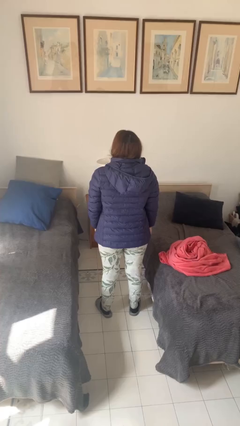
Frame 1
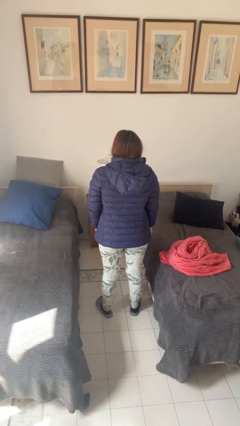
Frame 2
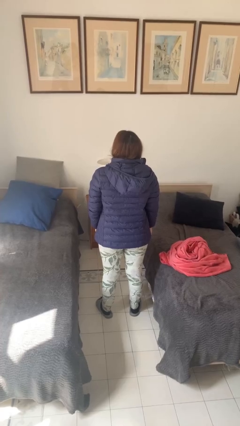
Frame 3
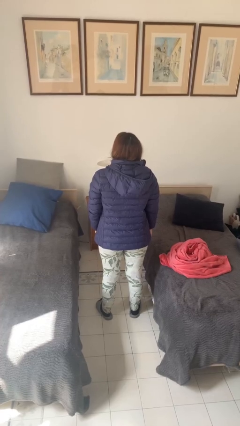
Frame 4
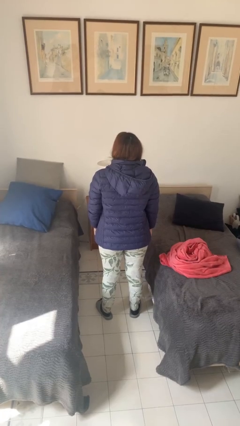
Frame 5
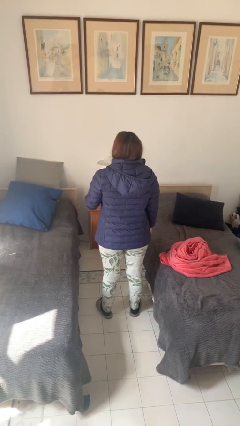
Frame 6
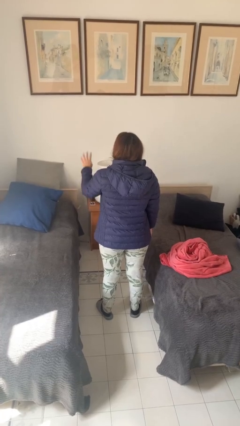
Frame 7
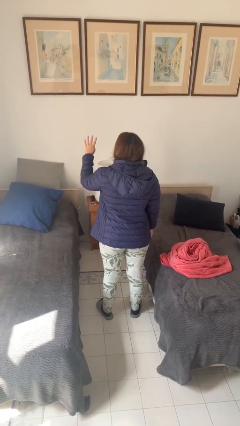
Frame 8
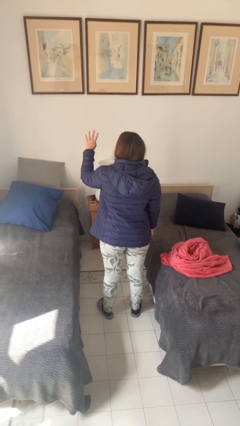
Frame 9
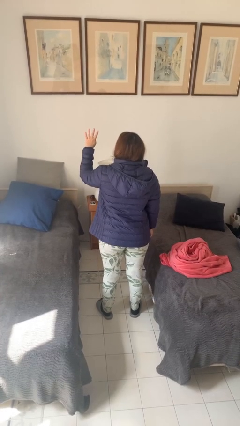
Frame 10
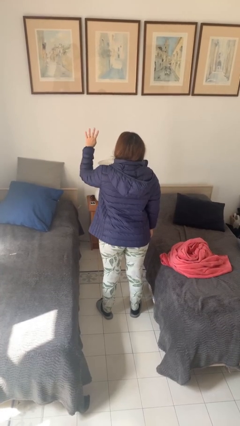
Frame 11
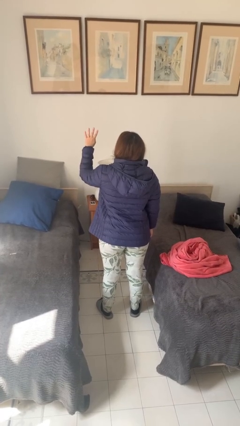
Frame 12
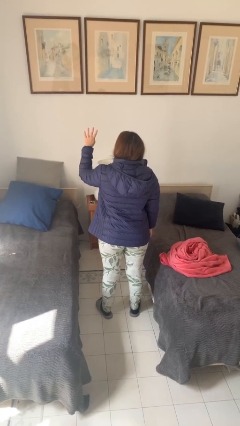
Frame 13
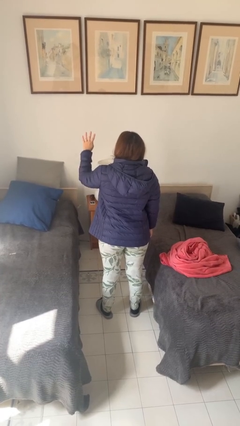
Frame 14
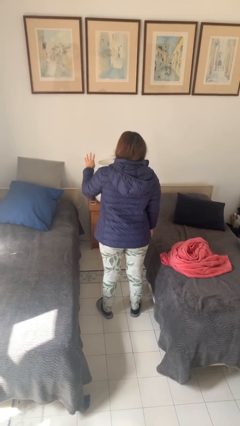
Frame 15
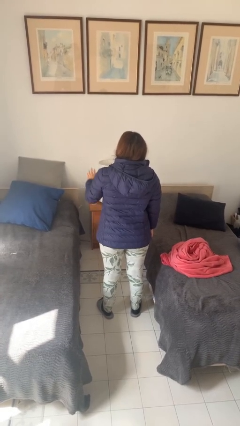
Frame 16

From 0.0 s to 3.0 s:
person gestures number four

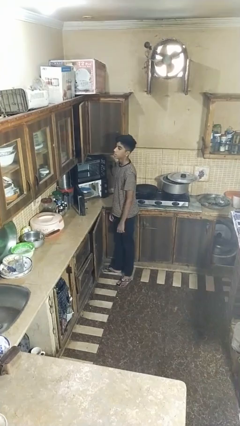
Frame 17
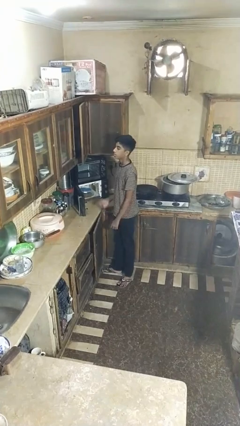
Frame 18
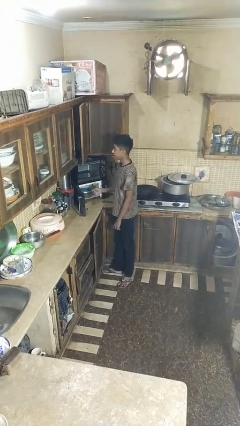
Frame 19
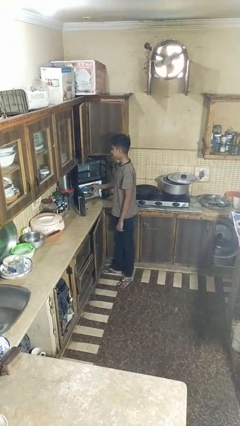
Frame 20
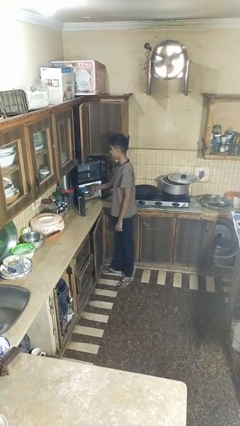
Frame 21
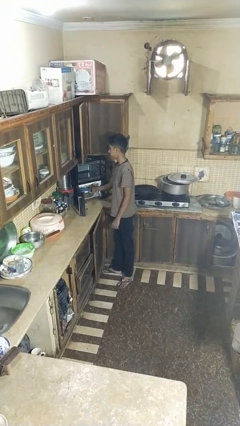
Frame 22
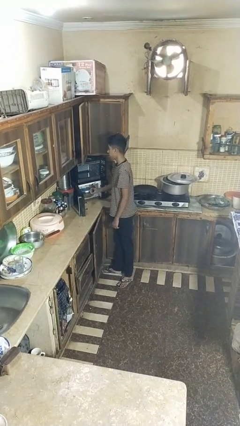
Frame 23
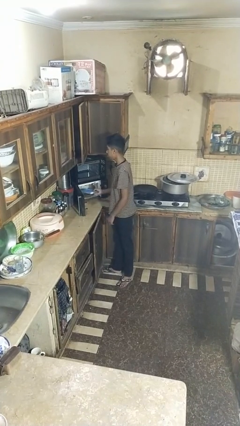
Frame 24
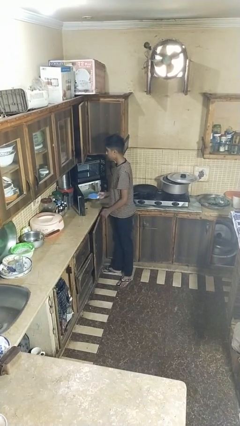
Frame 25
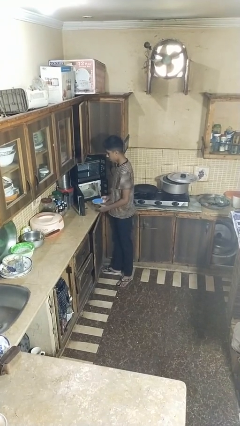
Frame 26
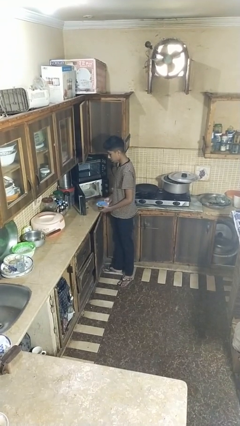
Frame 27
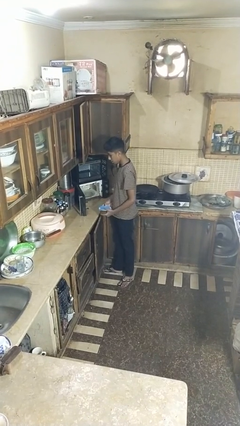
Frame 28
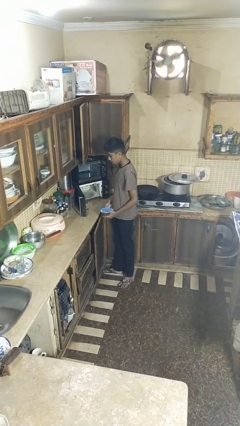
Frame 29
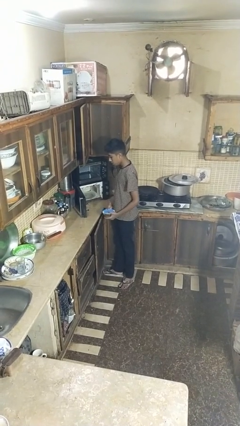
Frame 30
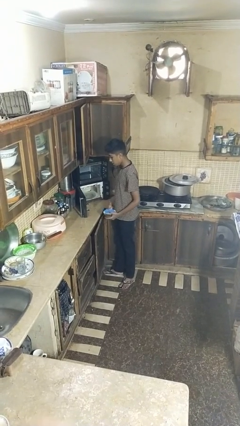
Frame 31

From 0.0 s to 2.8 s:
person takes object from microwave

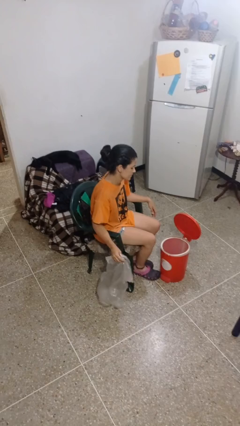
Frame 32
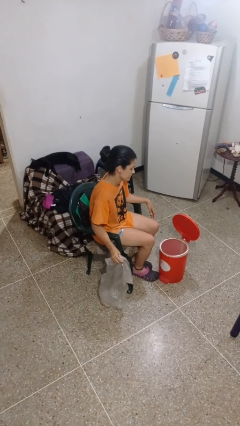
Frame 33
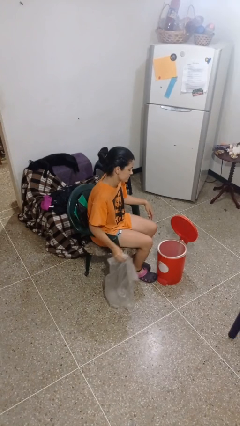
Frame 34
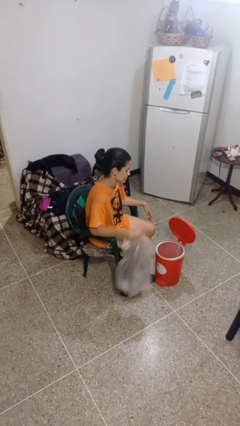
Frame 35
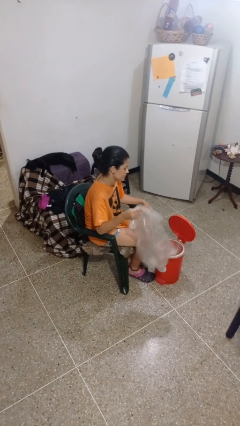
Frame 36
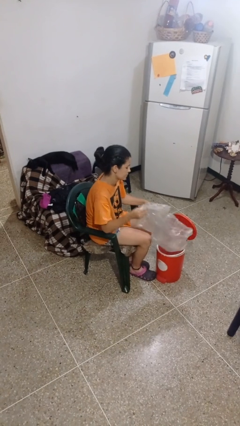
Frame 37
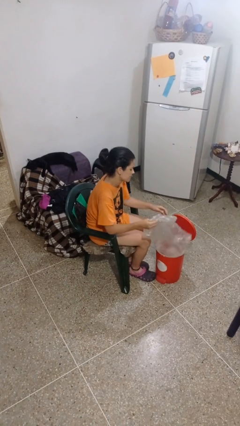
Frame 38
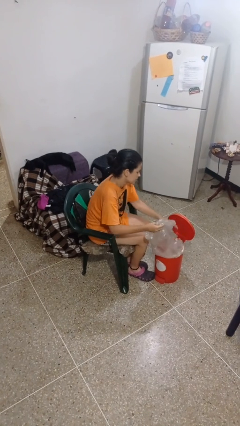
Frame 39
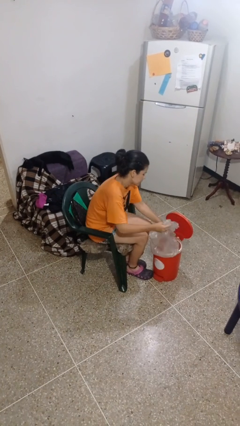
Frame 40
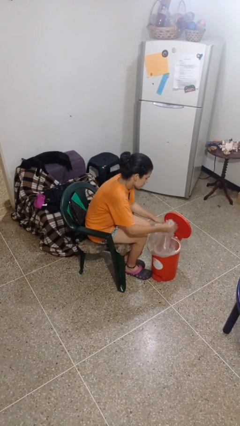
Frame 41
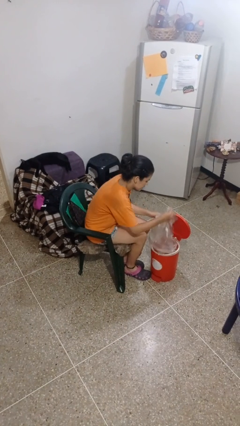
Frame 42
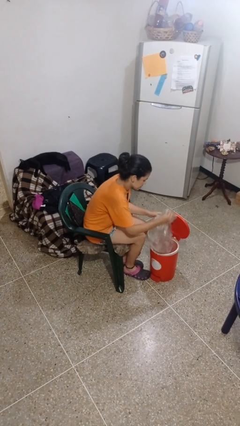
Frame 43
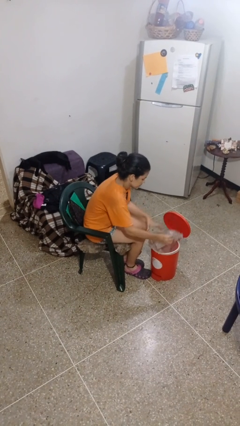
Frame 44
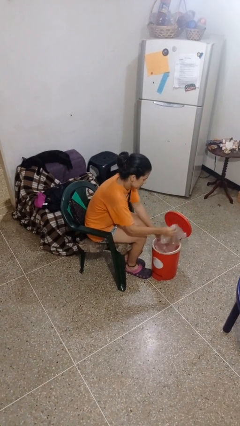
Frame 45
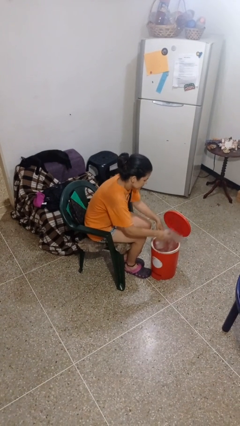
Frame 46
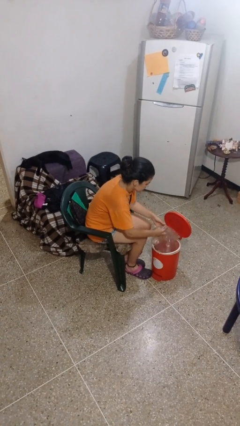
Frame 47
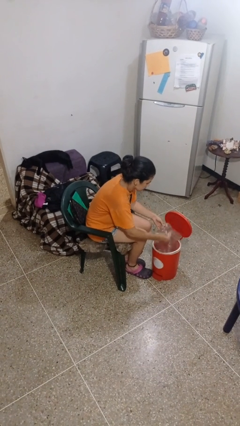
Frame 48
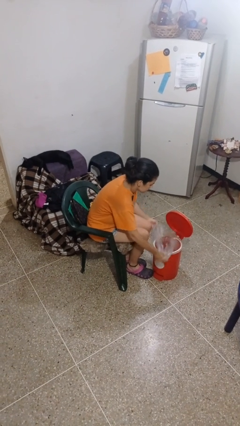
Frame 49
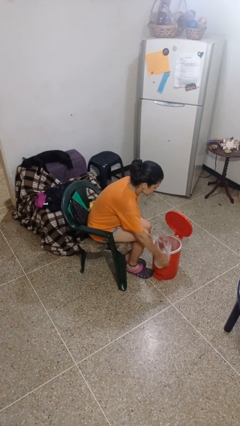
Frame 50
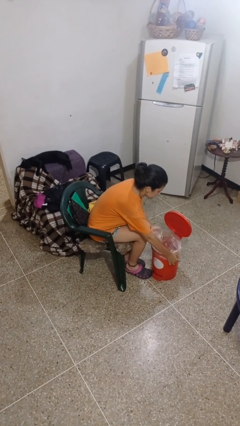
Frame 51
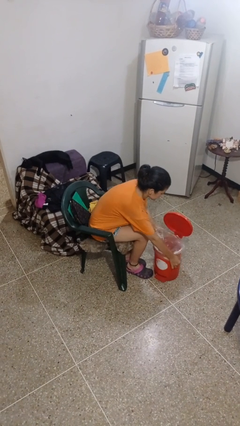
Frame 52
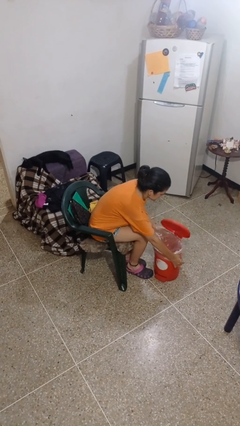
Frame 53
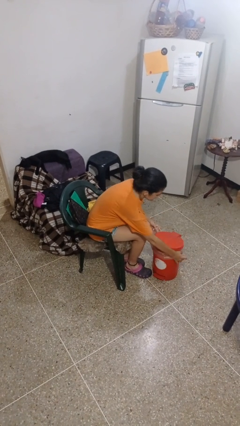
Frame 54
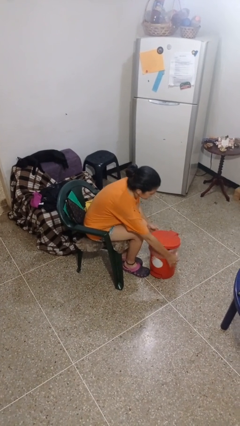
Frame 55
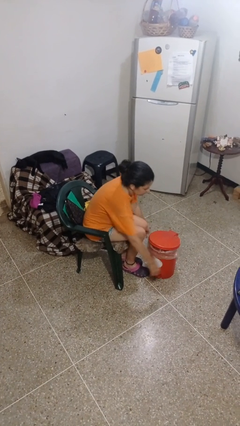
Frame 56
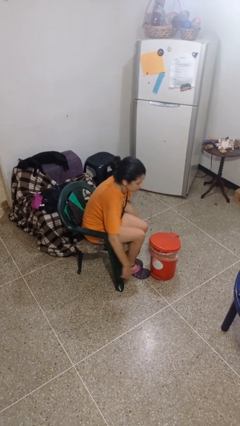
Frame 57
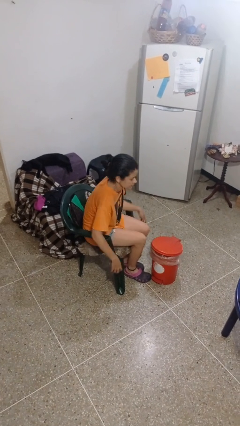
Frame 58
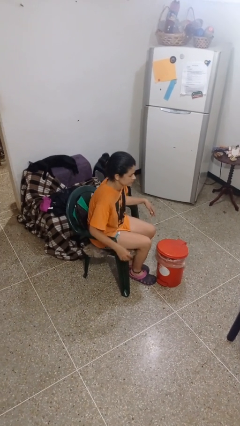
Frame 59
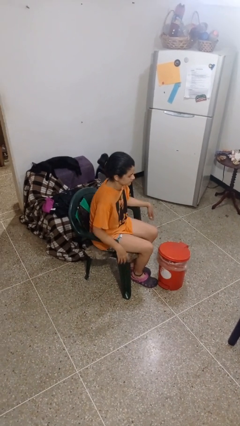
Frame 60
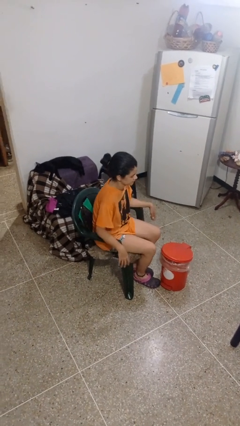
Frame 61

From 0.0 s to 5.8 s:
person inserts trashbag into trashcan

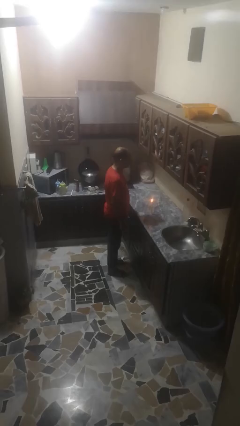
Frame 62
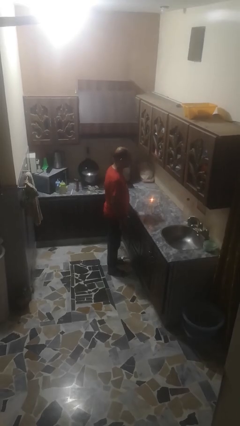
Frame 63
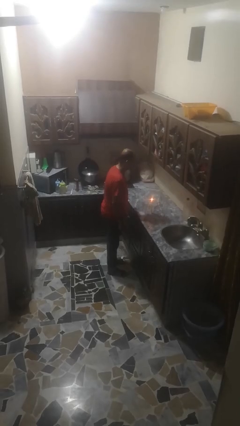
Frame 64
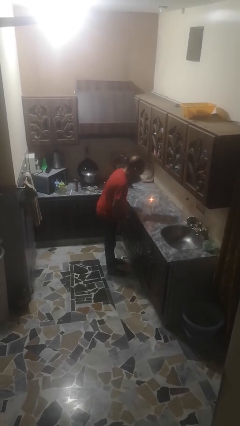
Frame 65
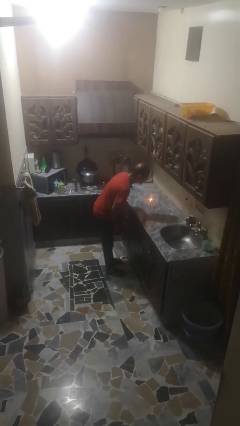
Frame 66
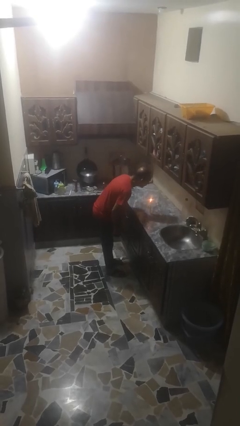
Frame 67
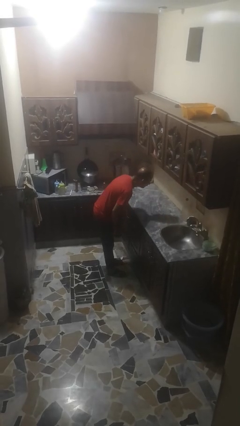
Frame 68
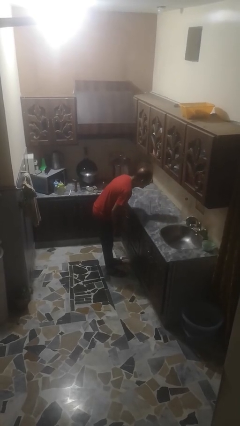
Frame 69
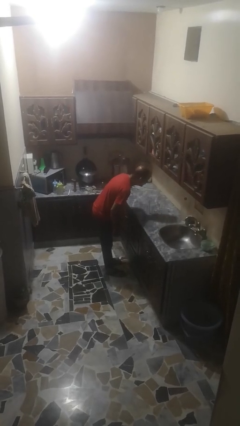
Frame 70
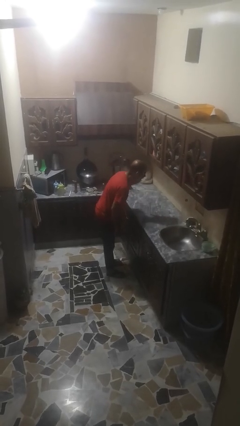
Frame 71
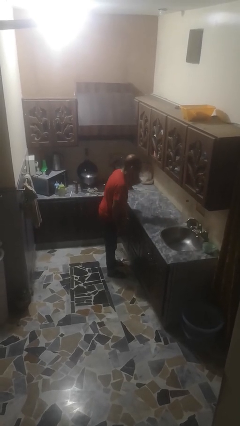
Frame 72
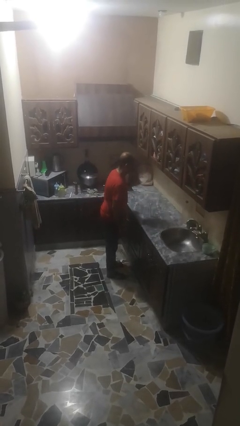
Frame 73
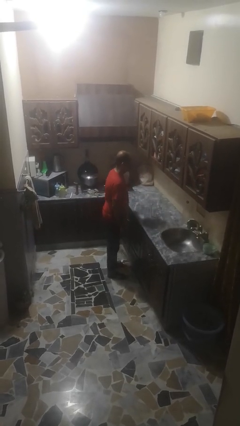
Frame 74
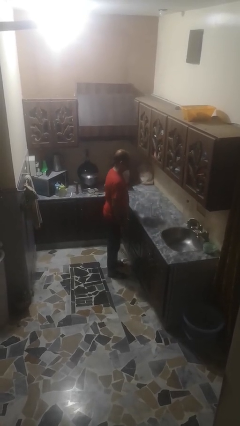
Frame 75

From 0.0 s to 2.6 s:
person extinguishes candle

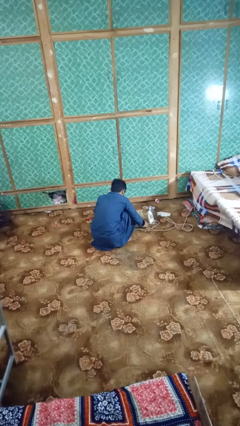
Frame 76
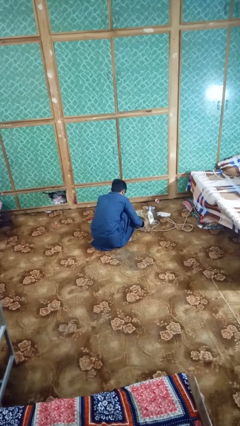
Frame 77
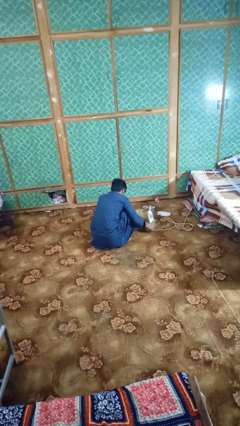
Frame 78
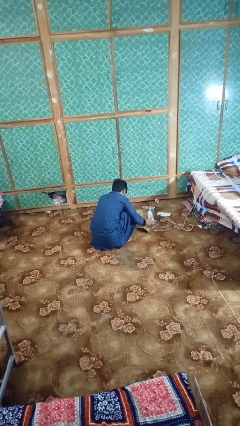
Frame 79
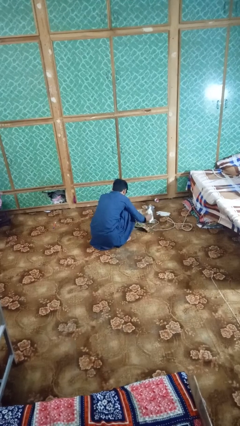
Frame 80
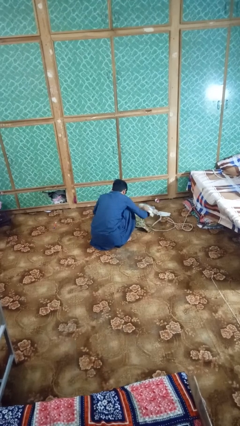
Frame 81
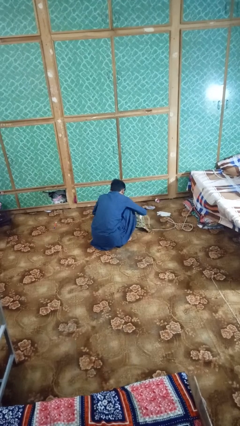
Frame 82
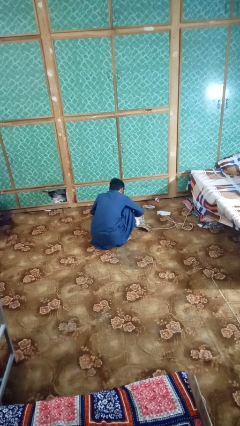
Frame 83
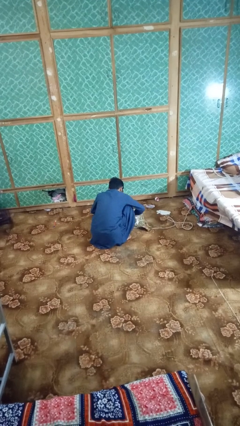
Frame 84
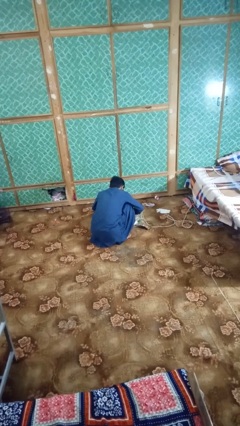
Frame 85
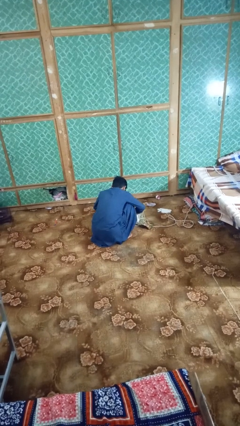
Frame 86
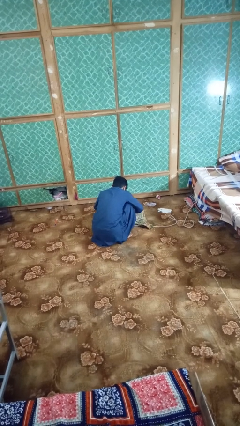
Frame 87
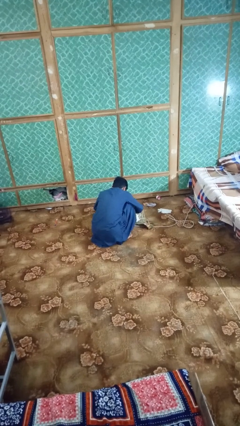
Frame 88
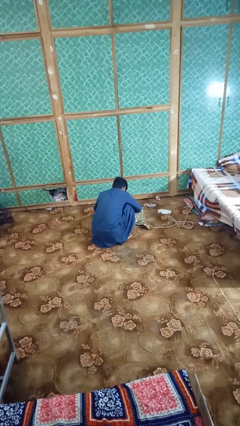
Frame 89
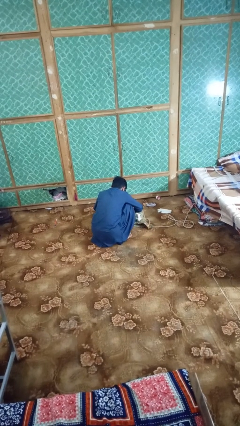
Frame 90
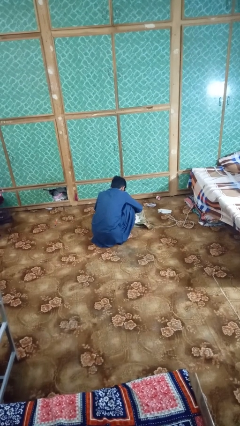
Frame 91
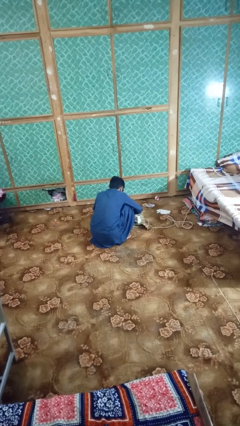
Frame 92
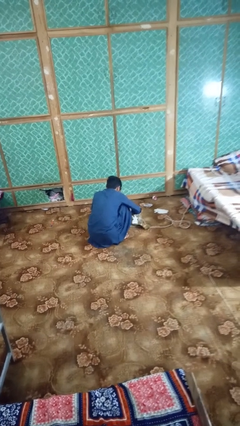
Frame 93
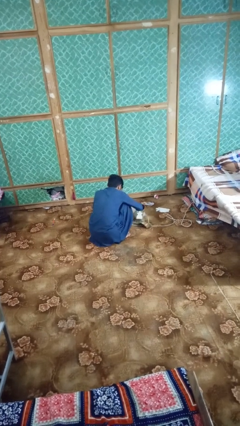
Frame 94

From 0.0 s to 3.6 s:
person irons clothes
